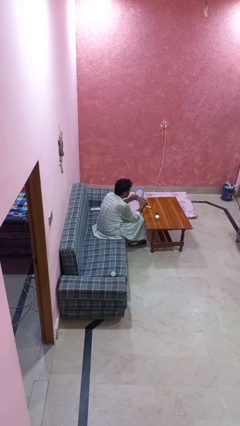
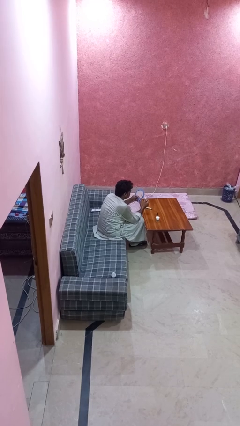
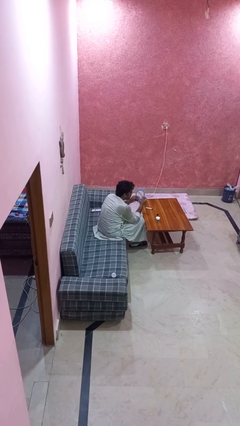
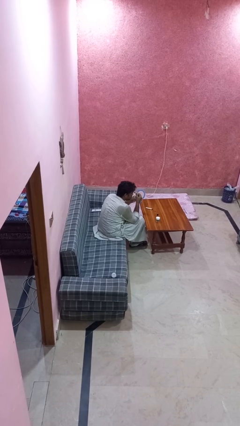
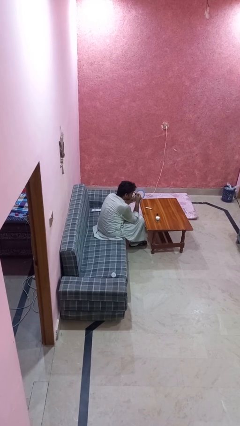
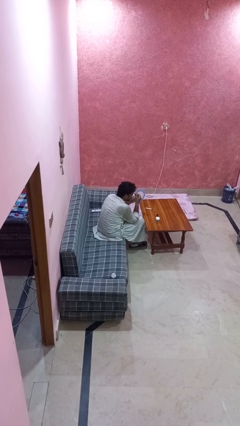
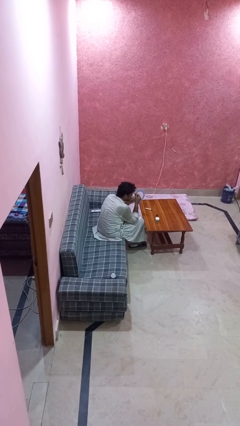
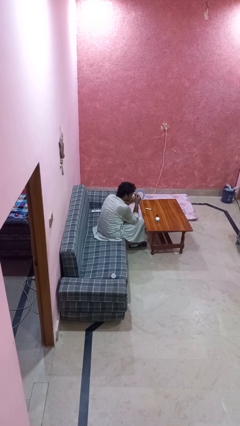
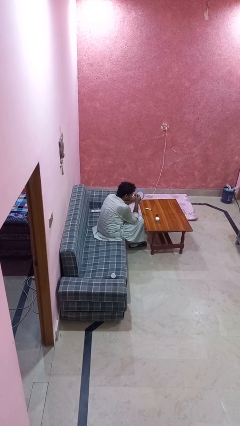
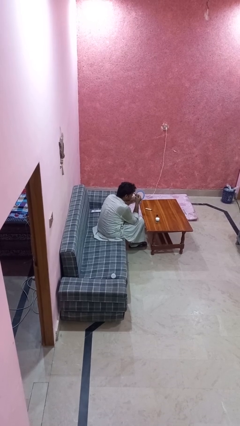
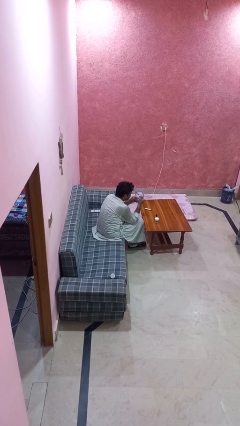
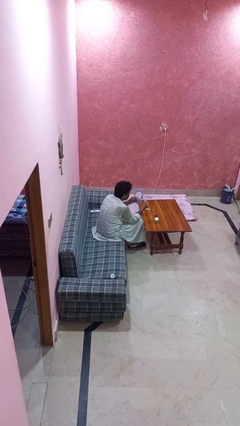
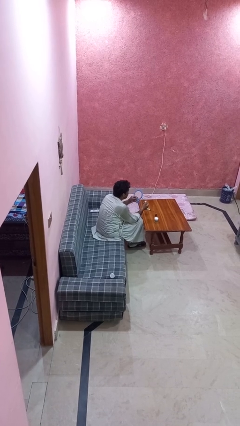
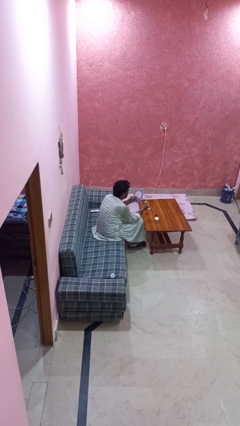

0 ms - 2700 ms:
person applies eye makeup

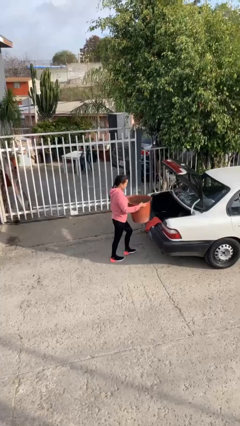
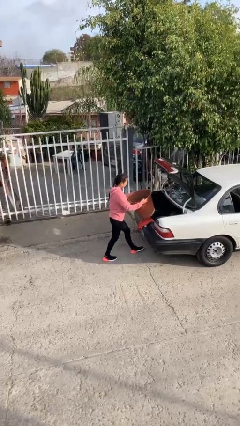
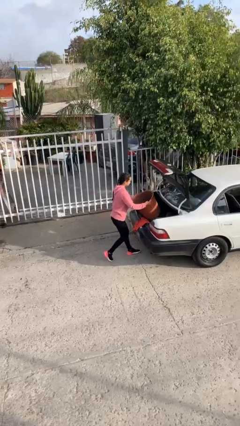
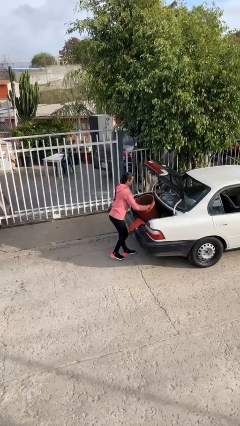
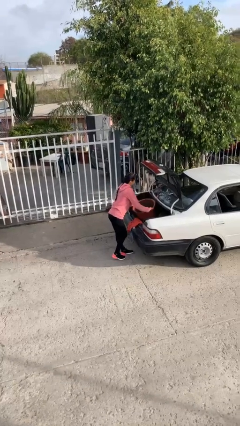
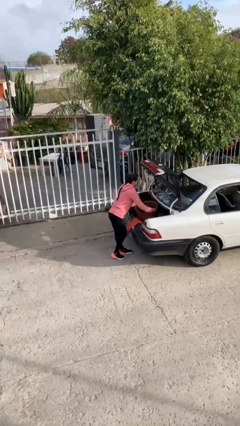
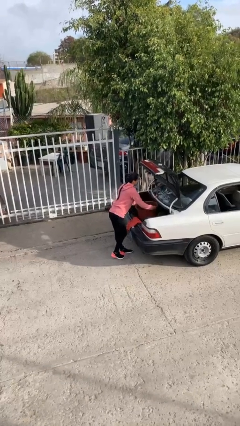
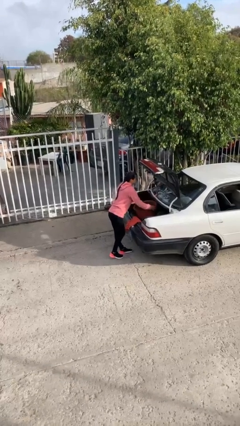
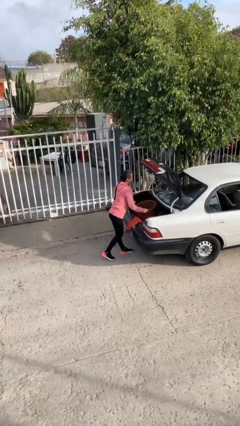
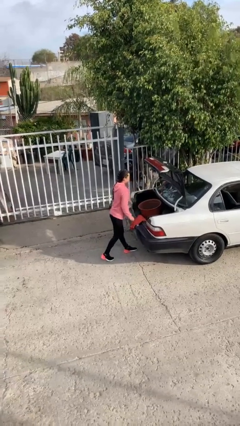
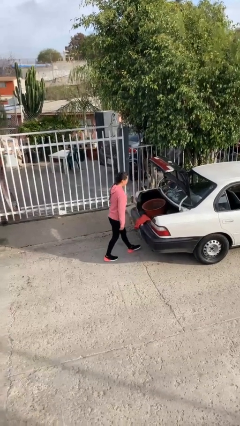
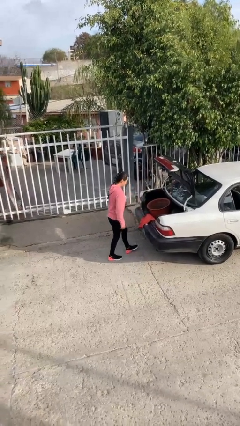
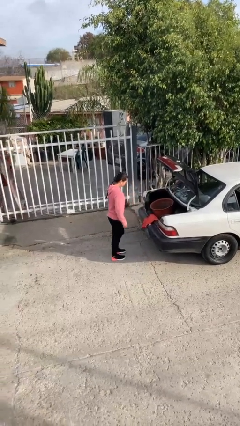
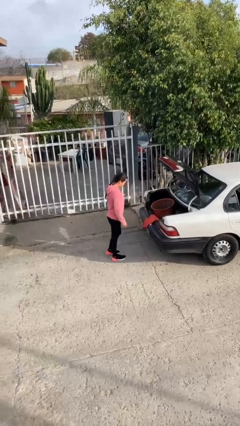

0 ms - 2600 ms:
person loads car

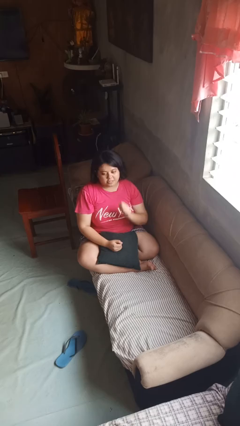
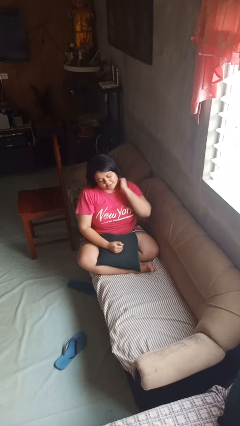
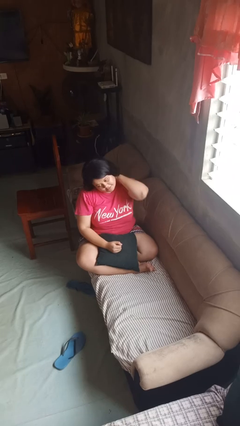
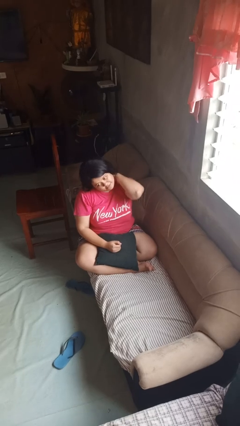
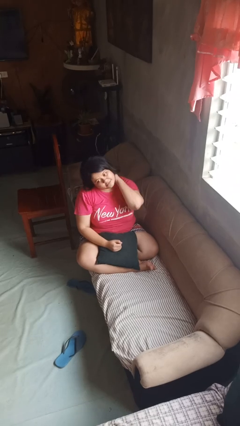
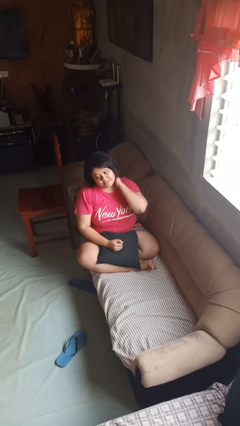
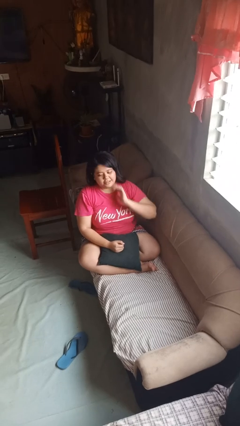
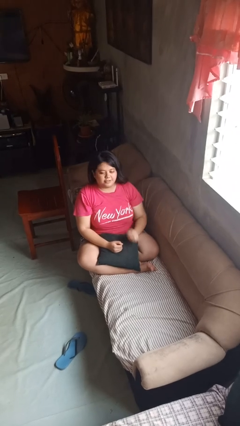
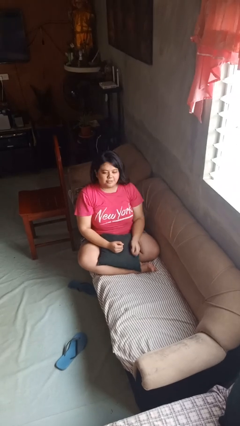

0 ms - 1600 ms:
person rubs neck

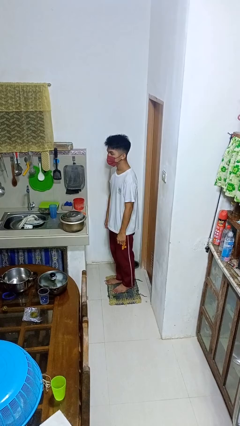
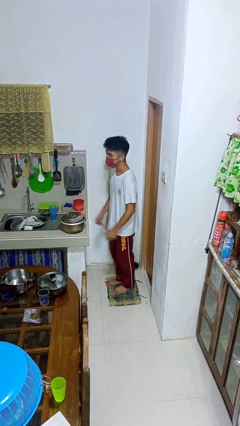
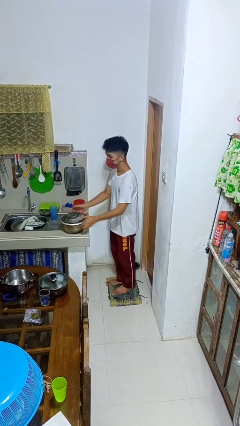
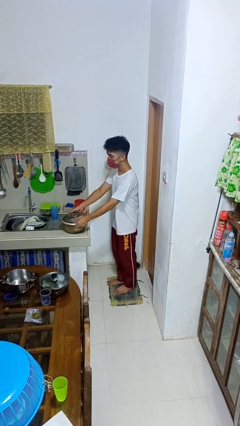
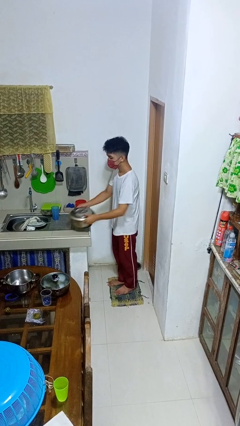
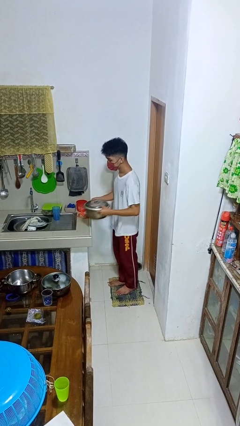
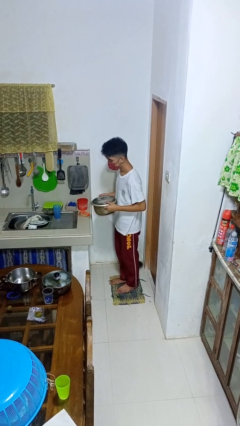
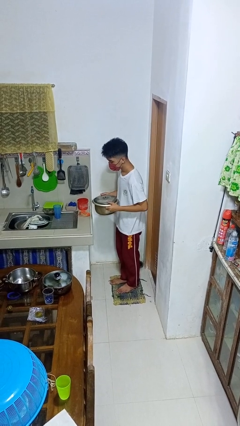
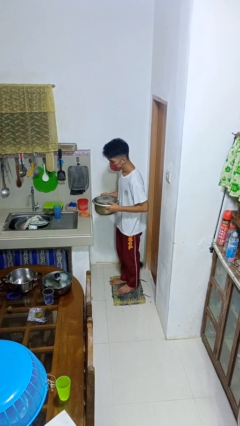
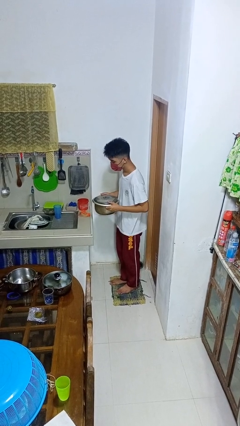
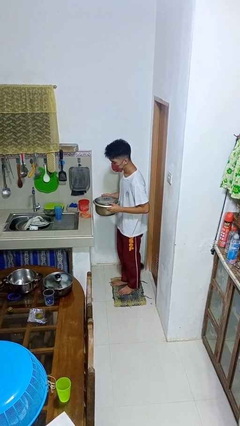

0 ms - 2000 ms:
person picks up object from countertop

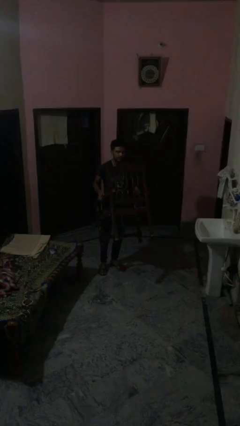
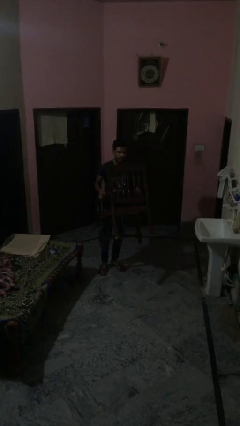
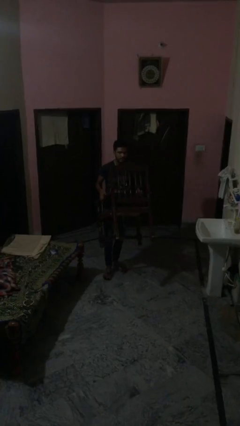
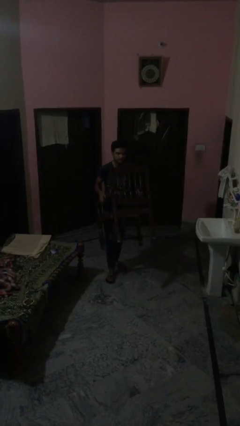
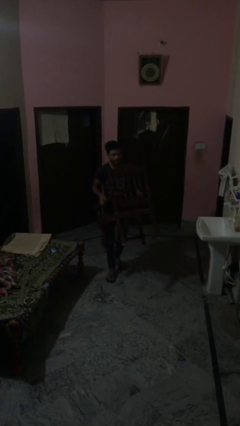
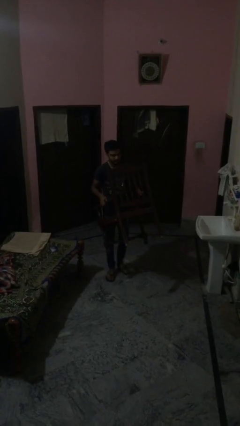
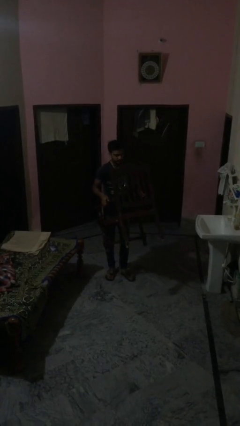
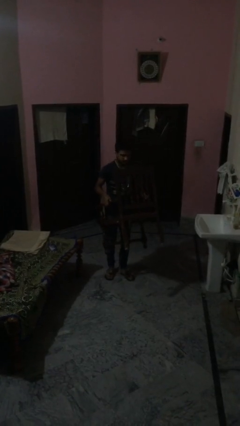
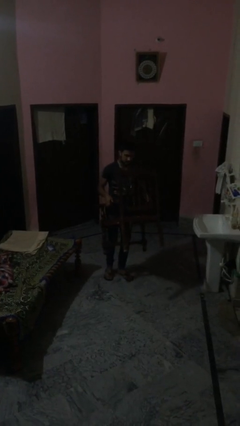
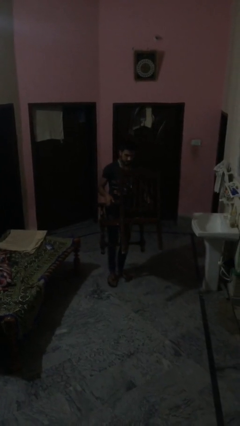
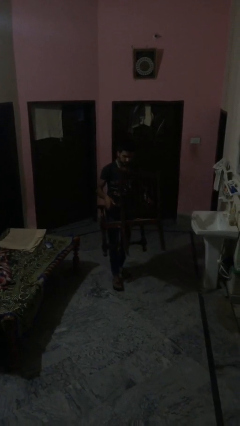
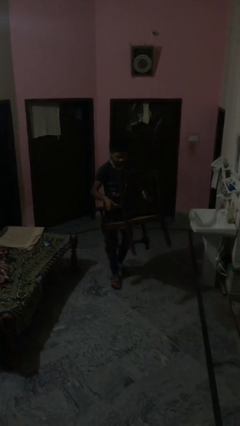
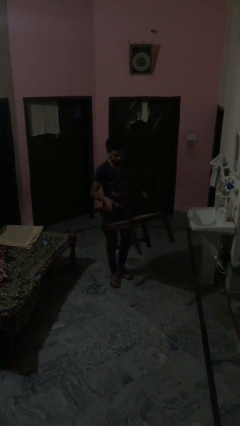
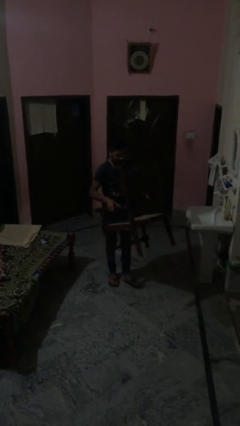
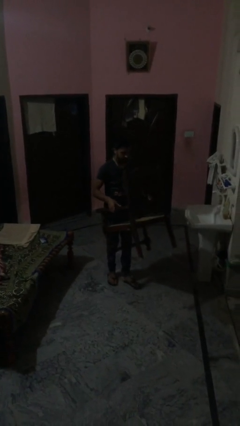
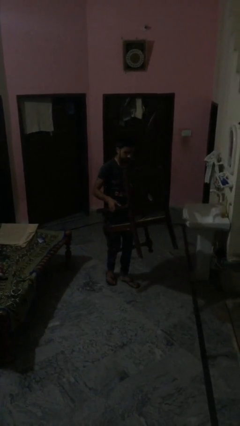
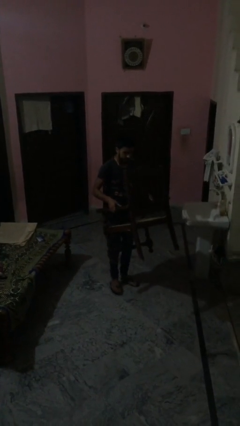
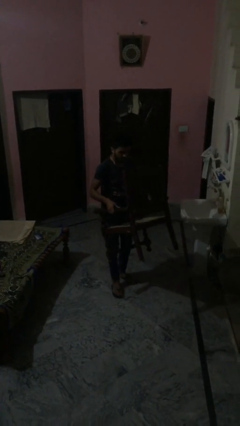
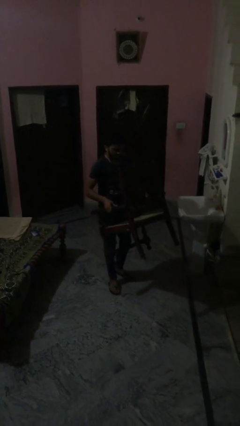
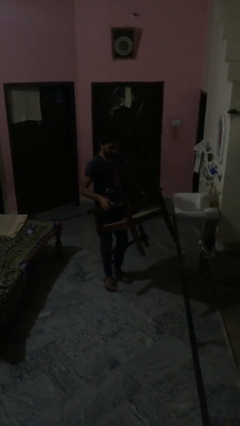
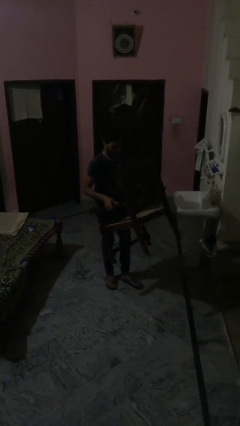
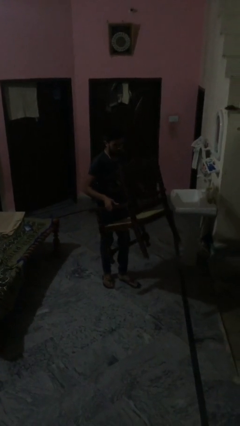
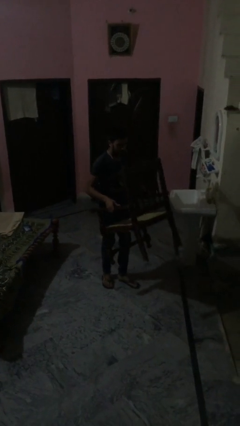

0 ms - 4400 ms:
person carries heavy object

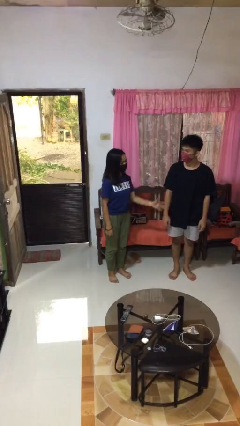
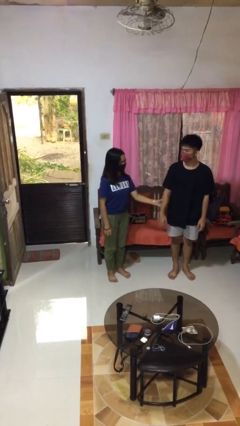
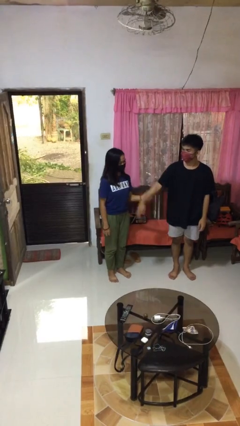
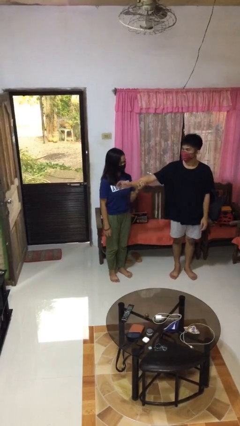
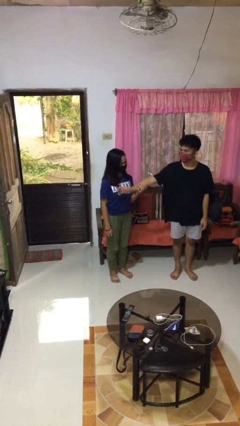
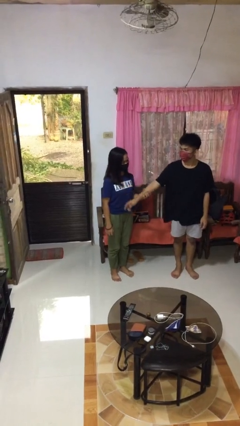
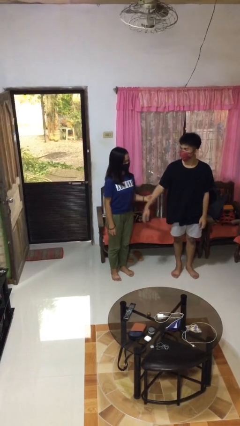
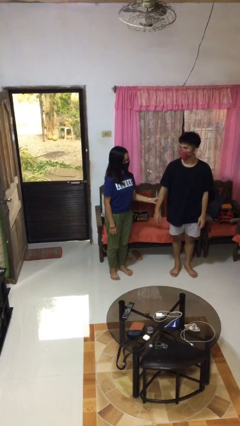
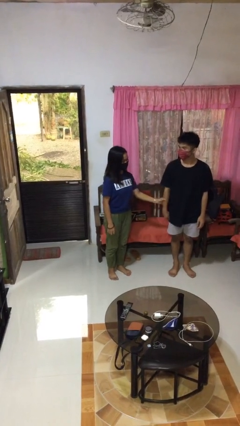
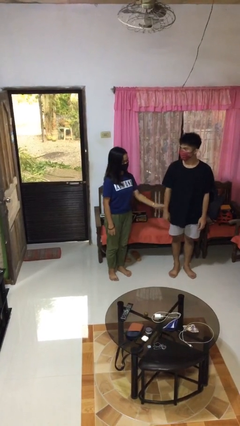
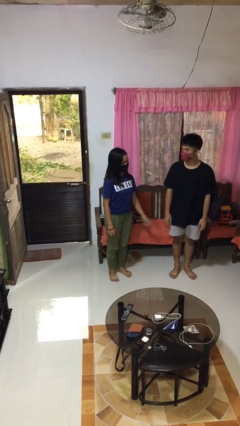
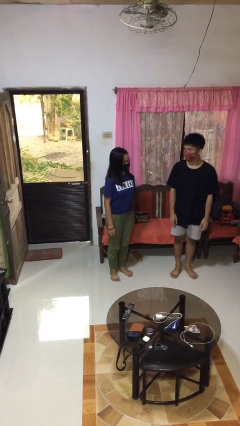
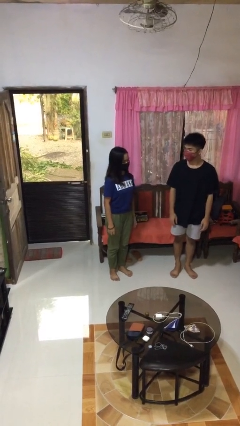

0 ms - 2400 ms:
person grabs person by forearm

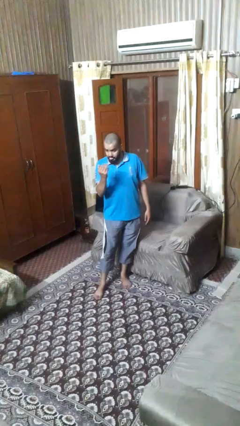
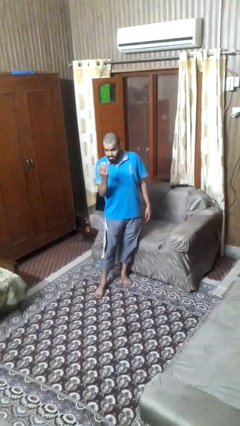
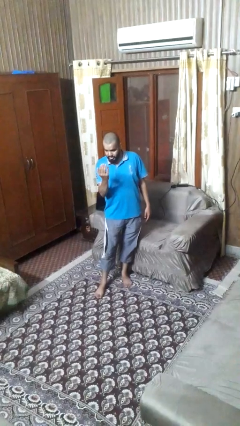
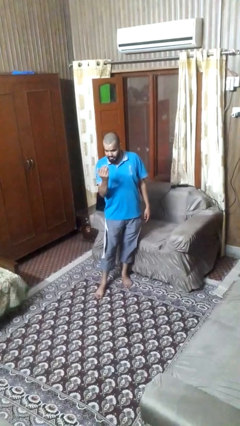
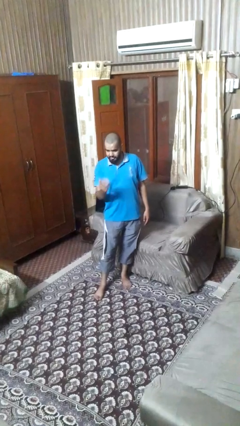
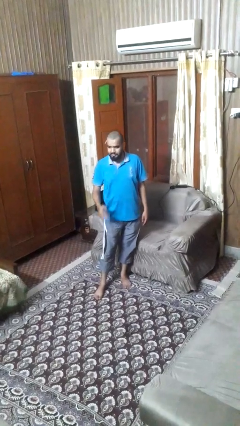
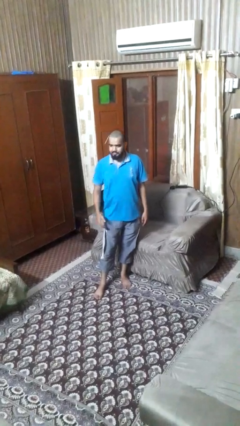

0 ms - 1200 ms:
person gestures come here
